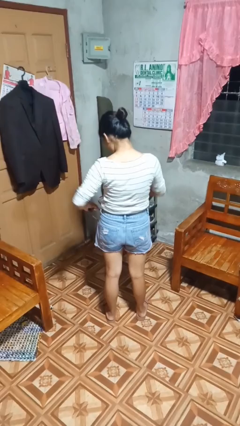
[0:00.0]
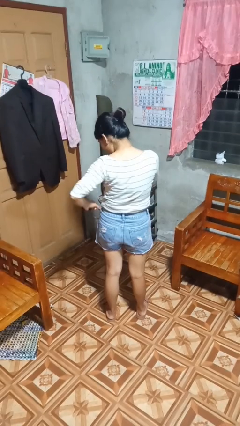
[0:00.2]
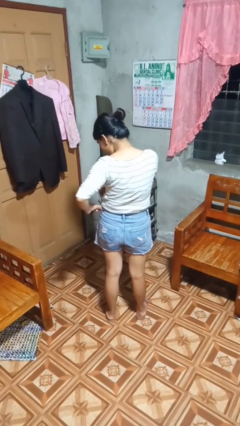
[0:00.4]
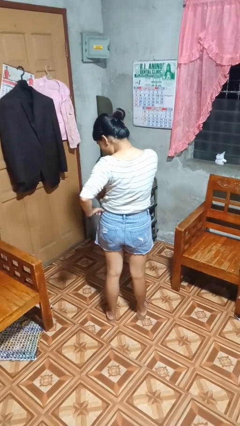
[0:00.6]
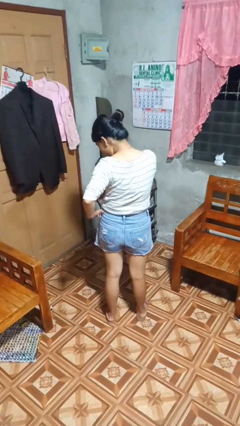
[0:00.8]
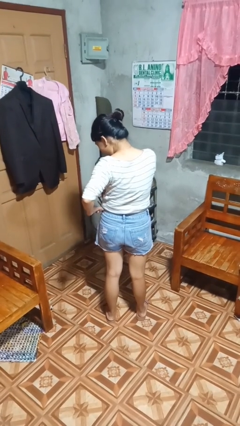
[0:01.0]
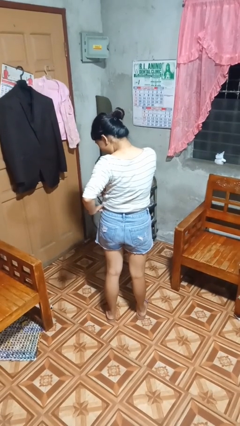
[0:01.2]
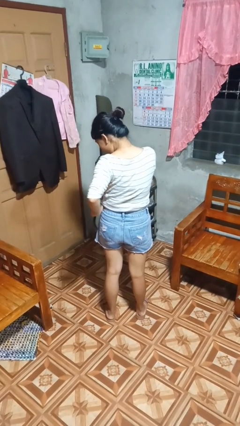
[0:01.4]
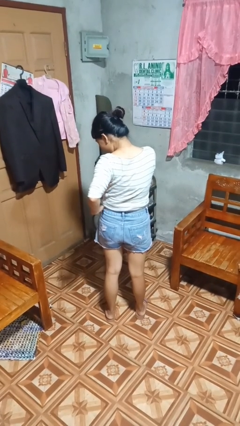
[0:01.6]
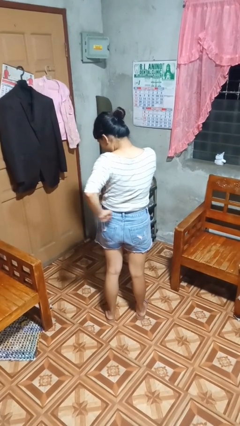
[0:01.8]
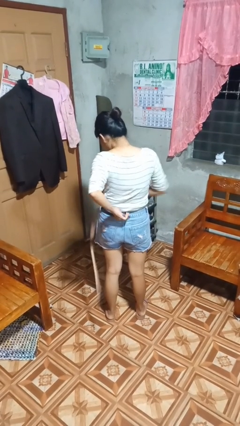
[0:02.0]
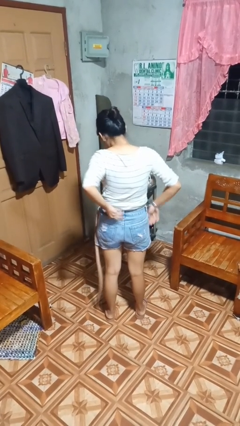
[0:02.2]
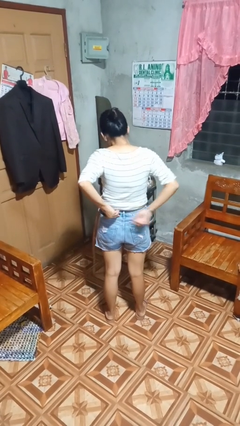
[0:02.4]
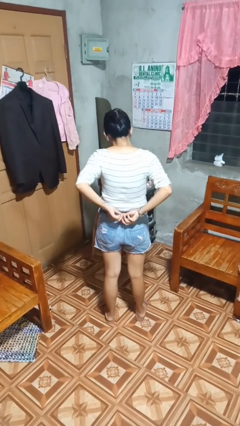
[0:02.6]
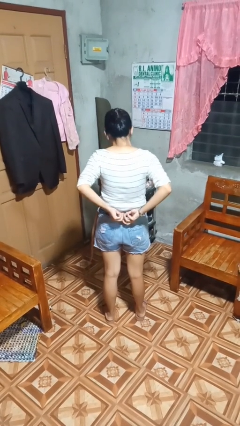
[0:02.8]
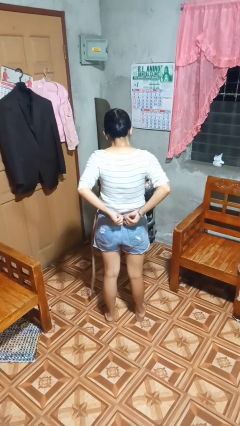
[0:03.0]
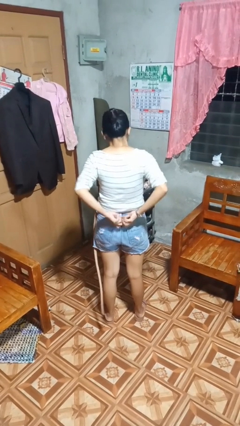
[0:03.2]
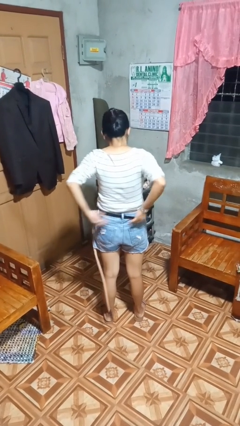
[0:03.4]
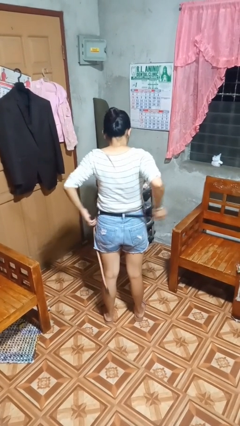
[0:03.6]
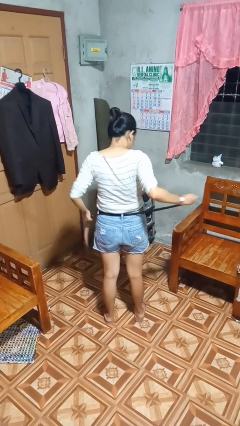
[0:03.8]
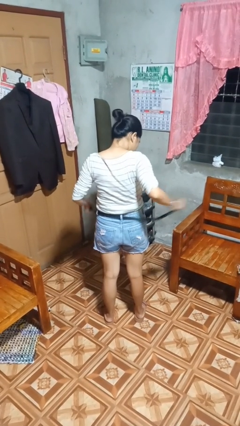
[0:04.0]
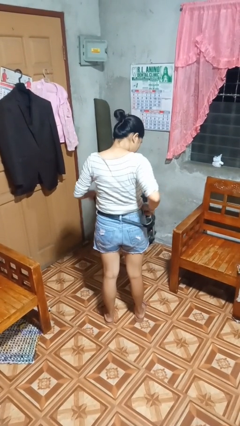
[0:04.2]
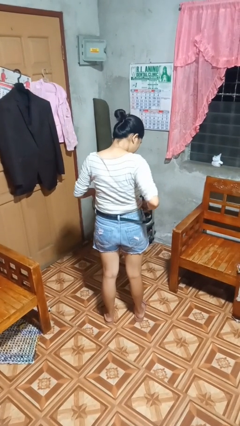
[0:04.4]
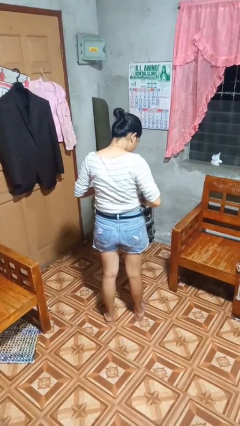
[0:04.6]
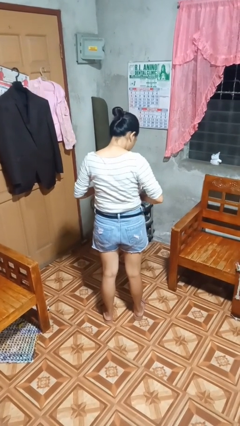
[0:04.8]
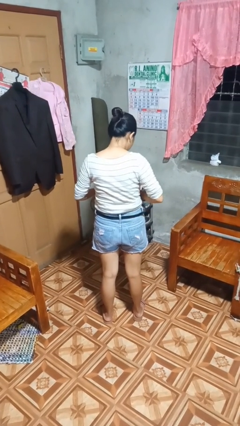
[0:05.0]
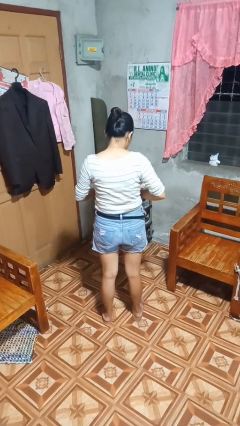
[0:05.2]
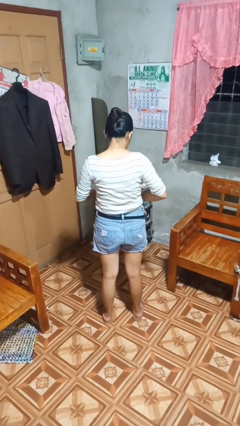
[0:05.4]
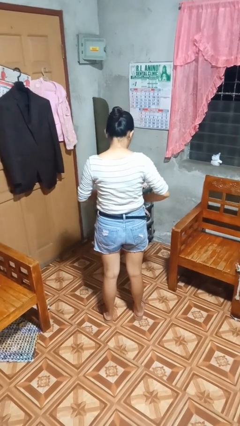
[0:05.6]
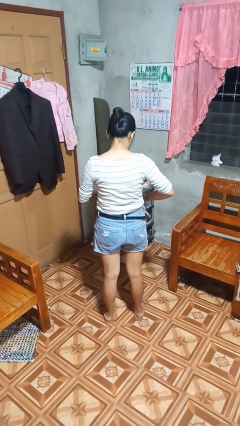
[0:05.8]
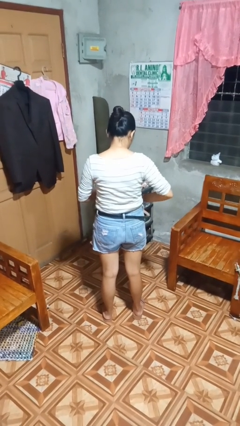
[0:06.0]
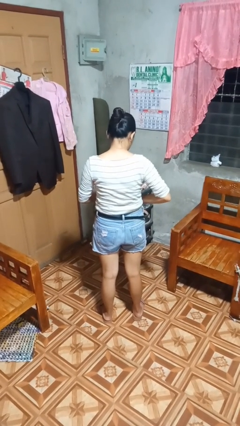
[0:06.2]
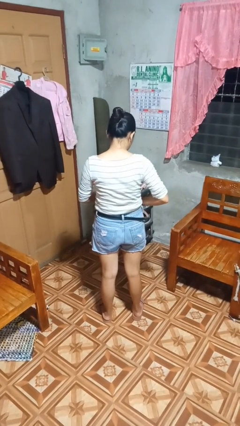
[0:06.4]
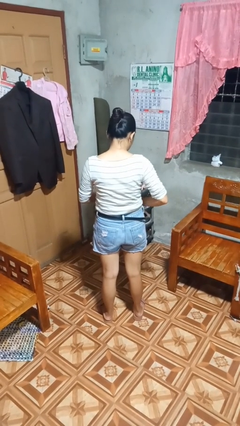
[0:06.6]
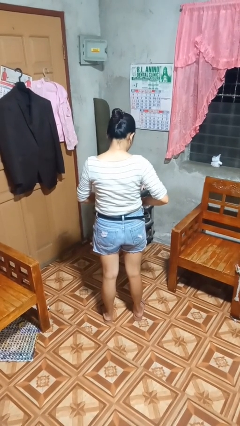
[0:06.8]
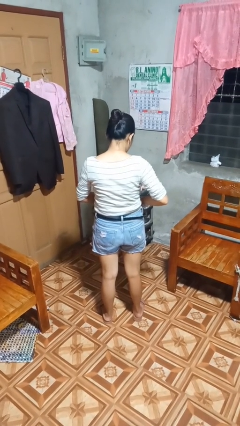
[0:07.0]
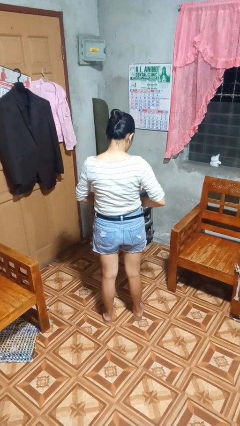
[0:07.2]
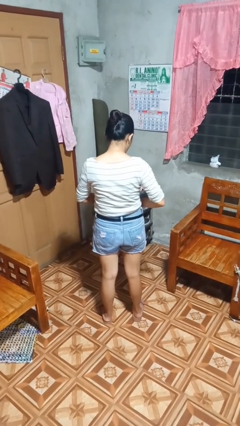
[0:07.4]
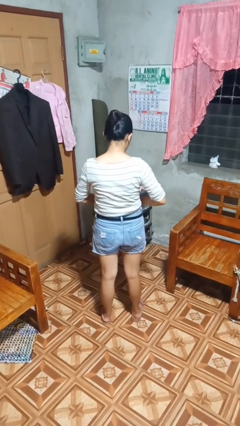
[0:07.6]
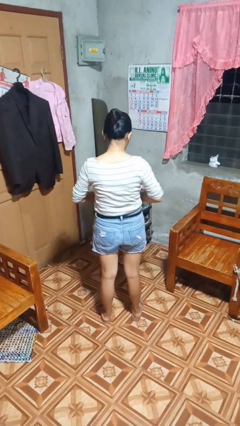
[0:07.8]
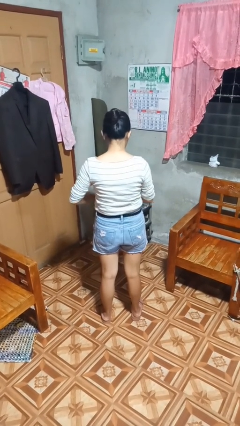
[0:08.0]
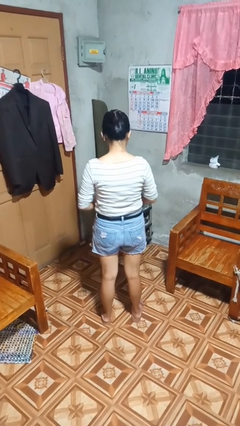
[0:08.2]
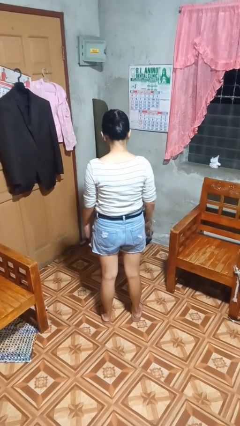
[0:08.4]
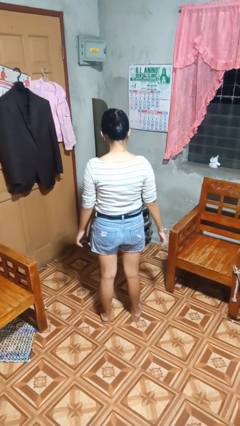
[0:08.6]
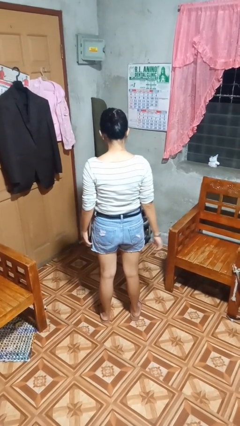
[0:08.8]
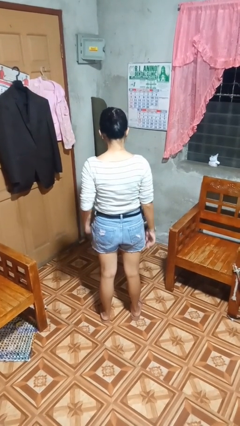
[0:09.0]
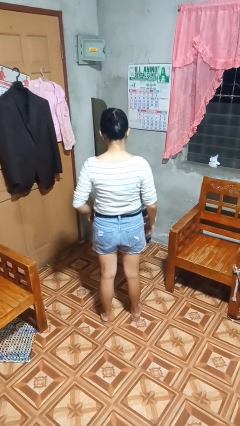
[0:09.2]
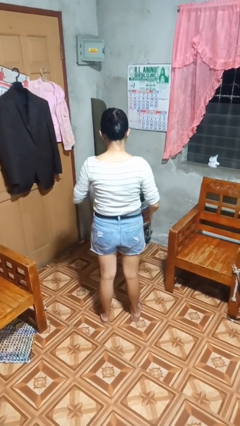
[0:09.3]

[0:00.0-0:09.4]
person puts on belt

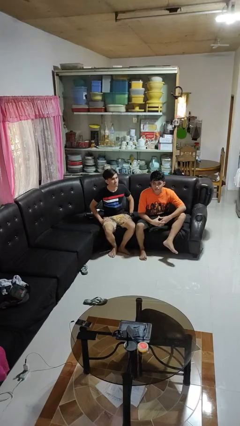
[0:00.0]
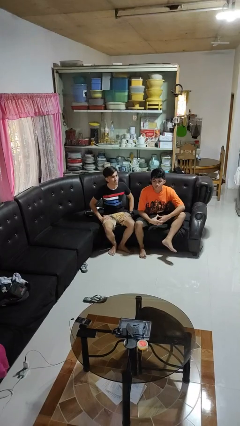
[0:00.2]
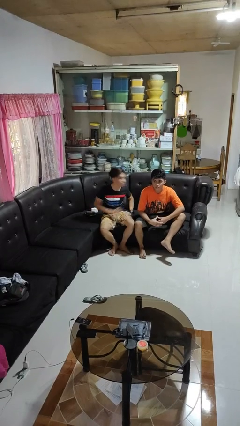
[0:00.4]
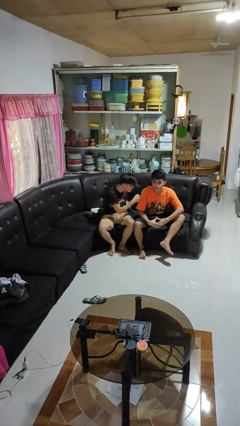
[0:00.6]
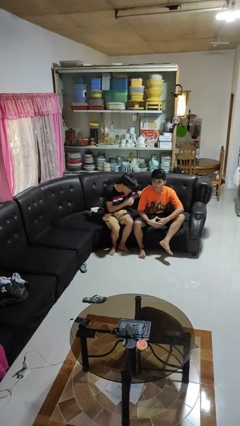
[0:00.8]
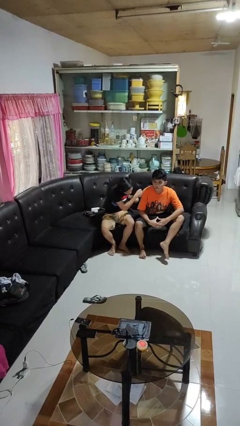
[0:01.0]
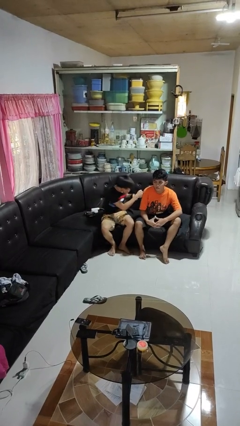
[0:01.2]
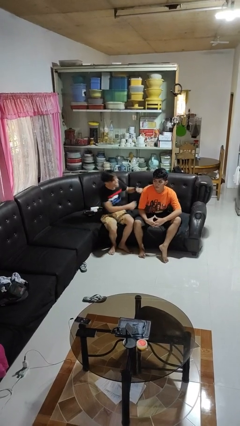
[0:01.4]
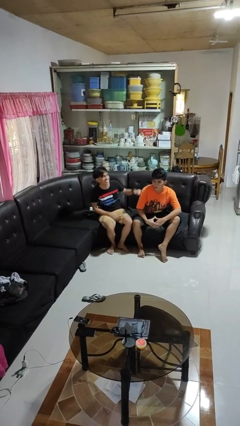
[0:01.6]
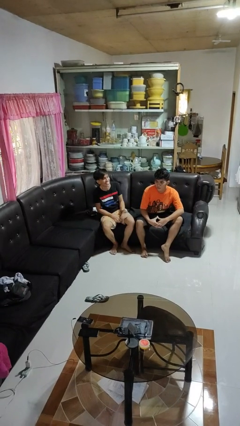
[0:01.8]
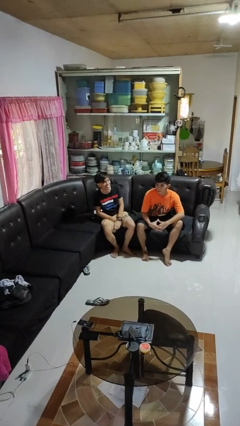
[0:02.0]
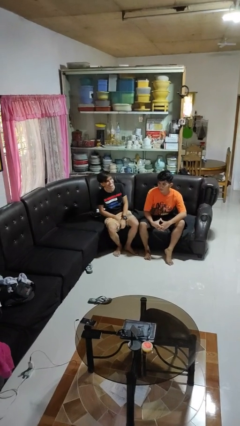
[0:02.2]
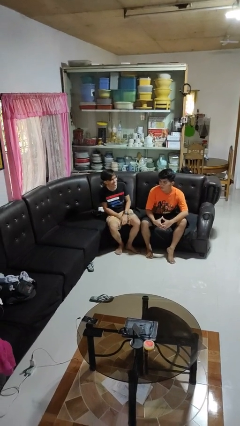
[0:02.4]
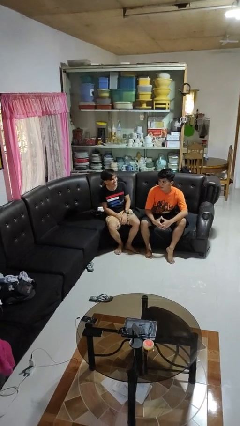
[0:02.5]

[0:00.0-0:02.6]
person pounds shoulders of person

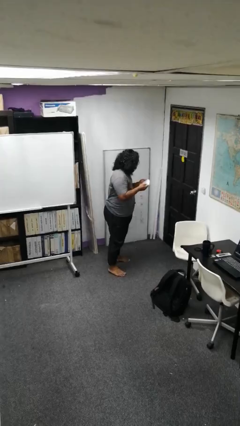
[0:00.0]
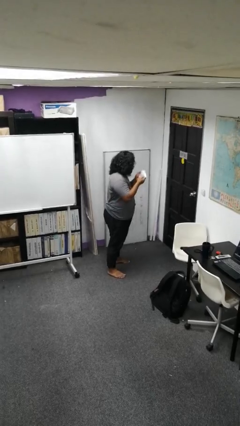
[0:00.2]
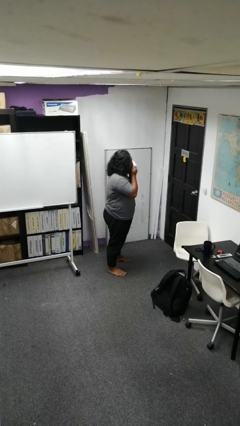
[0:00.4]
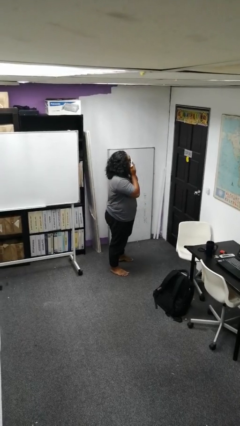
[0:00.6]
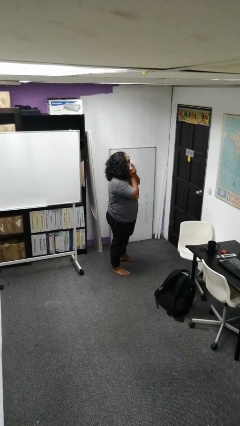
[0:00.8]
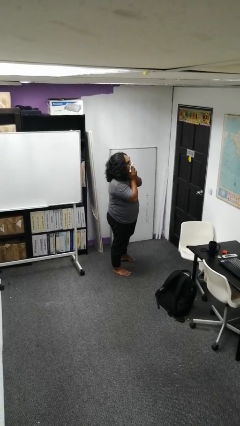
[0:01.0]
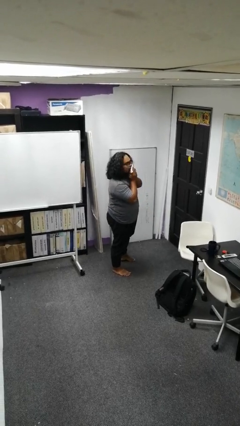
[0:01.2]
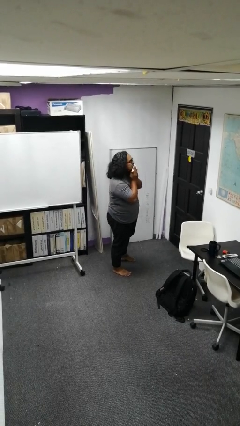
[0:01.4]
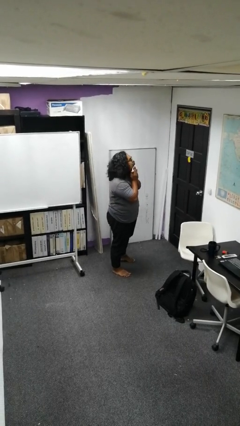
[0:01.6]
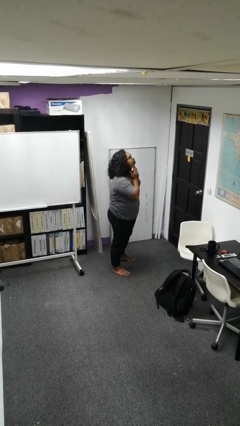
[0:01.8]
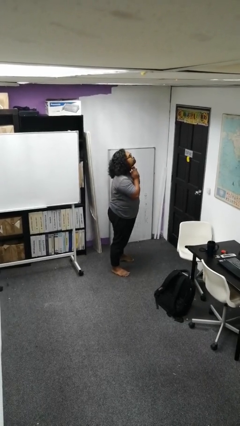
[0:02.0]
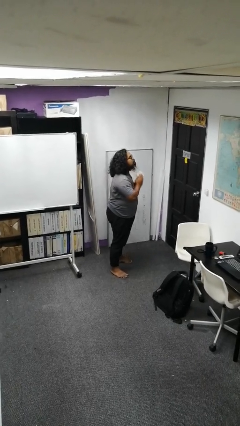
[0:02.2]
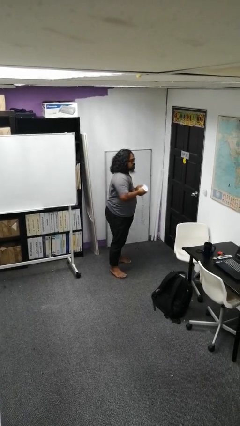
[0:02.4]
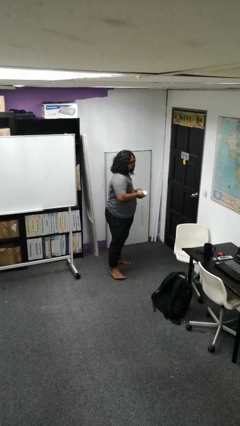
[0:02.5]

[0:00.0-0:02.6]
person wipes mouth with napkin

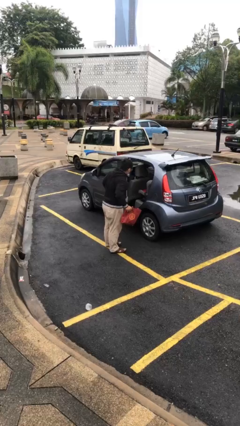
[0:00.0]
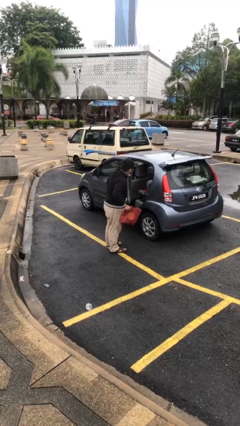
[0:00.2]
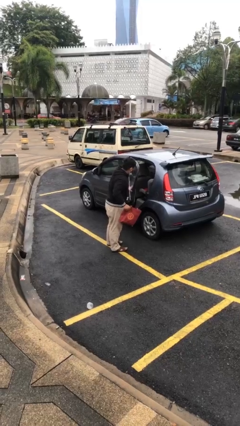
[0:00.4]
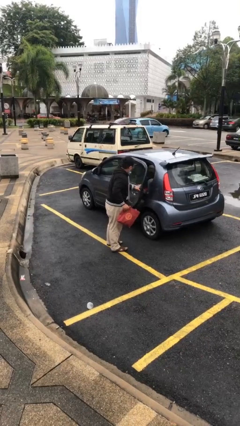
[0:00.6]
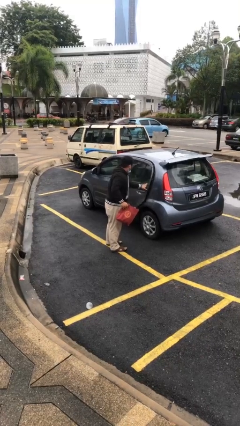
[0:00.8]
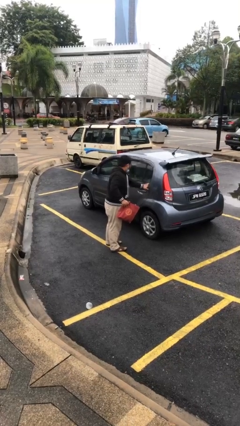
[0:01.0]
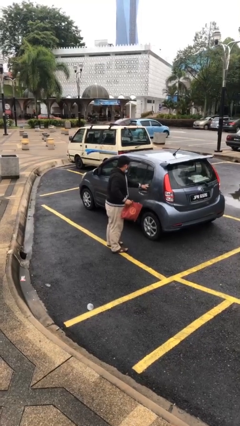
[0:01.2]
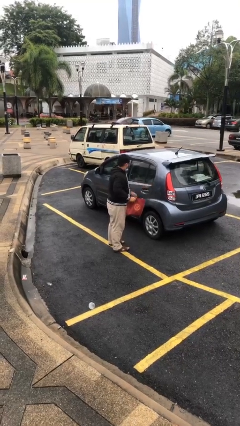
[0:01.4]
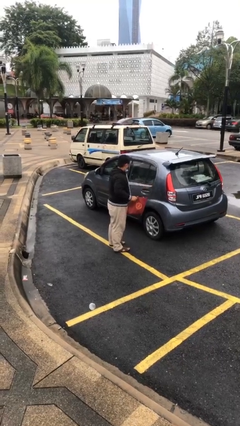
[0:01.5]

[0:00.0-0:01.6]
person closes car door

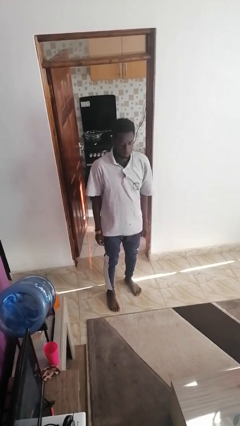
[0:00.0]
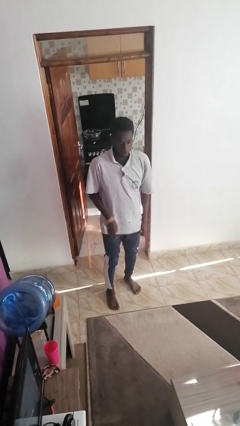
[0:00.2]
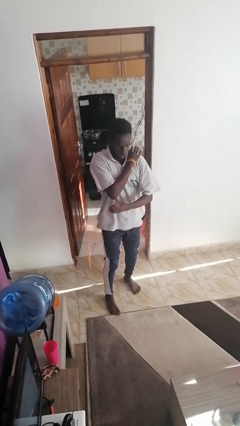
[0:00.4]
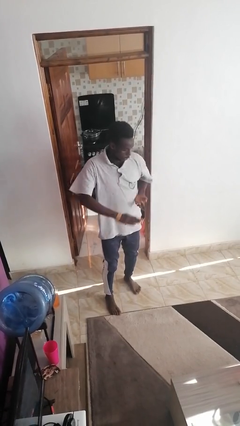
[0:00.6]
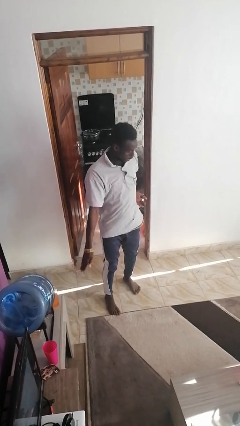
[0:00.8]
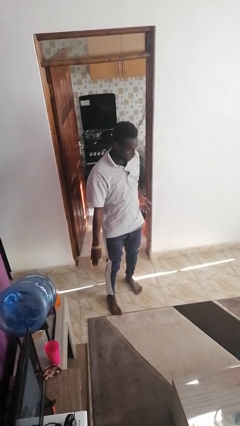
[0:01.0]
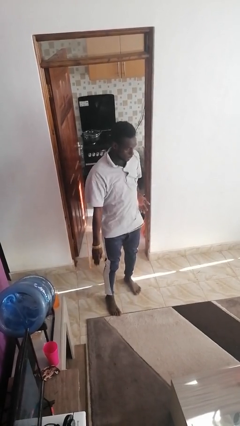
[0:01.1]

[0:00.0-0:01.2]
person karate chop

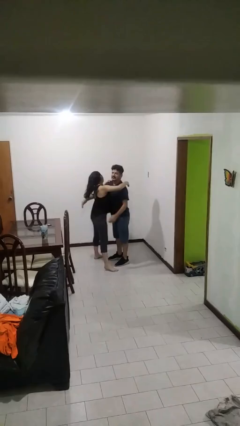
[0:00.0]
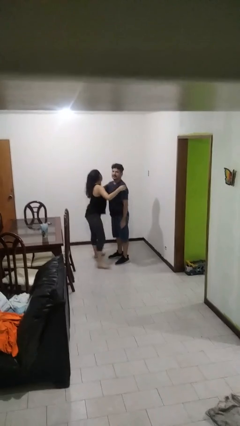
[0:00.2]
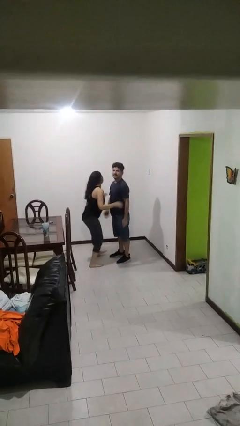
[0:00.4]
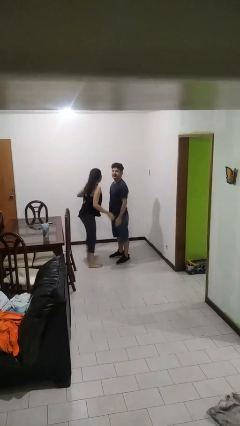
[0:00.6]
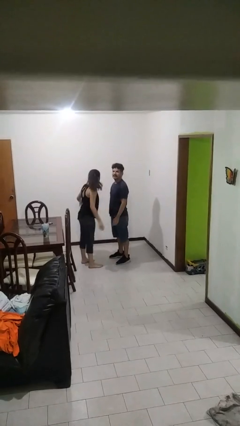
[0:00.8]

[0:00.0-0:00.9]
person puts down person
